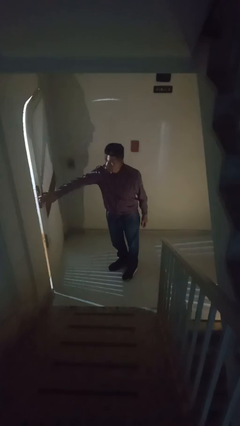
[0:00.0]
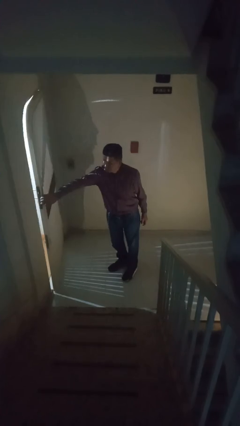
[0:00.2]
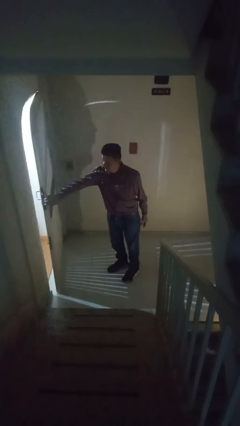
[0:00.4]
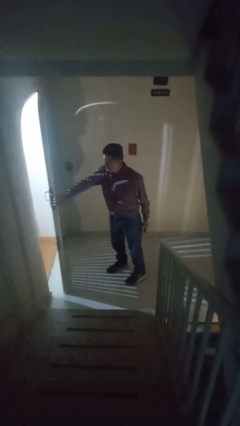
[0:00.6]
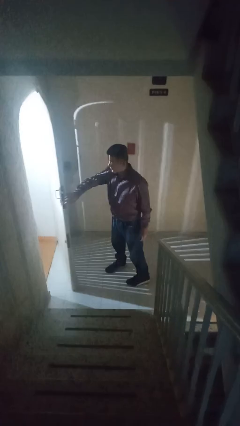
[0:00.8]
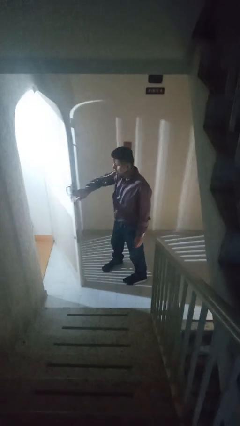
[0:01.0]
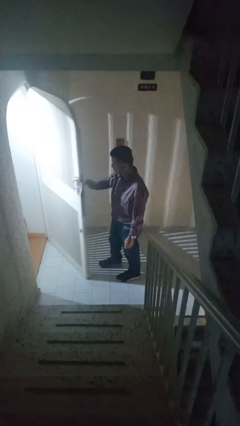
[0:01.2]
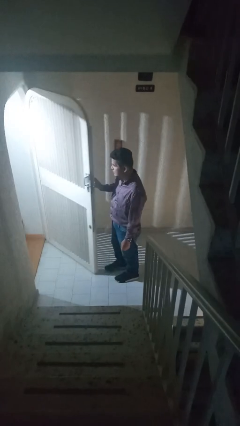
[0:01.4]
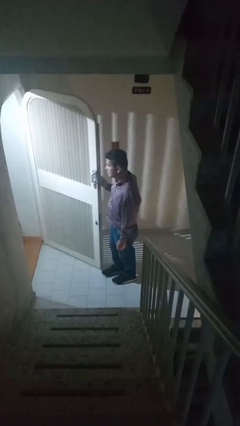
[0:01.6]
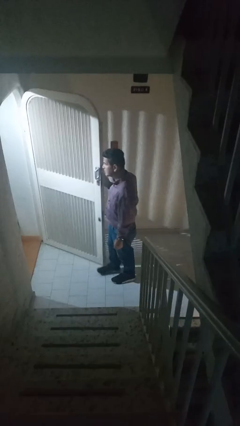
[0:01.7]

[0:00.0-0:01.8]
person opens facility door

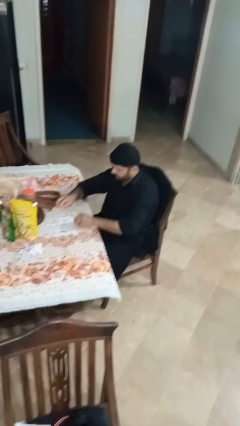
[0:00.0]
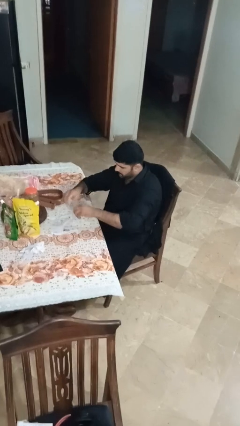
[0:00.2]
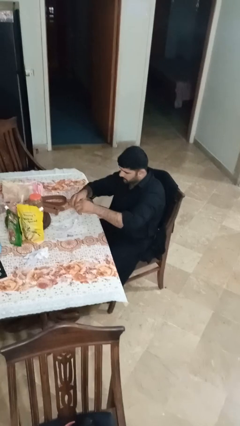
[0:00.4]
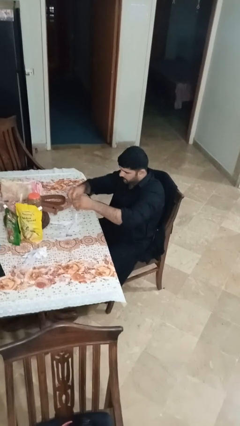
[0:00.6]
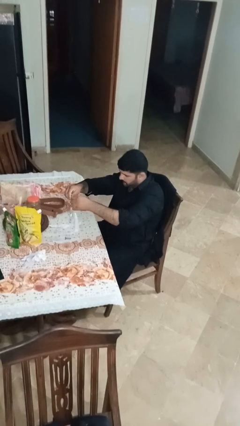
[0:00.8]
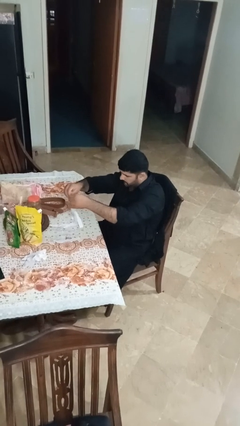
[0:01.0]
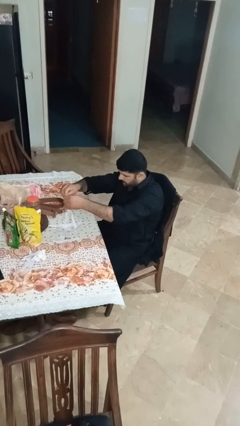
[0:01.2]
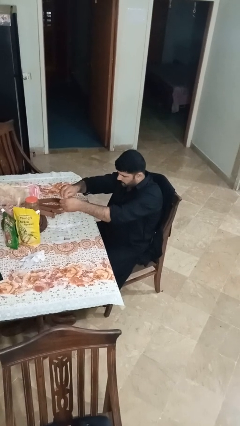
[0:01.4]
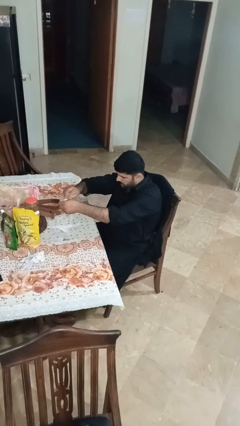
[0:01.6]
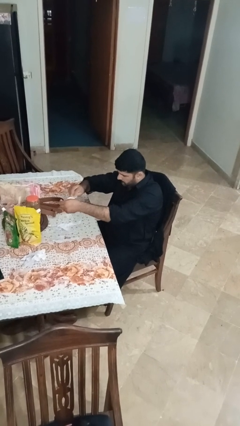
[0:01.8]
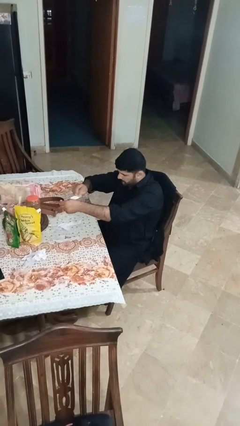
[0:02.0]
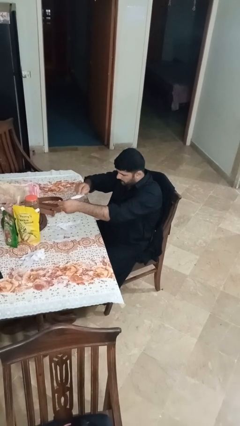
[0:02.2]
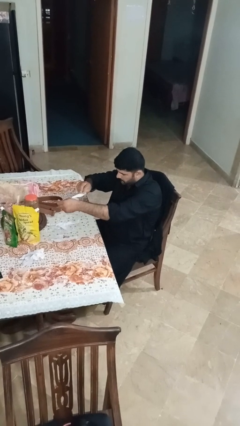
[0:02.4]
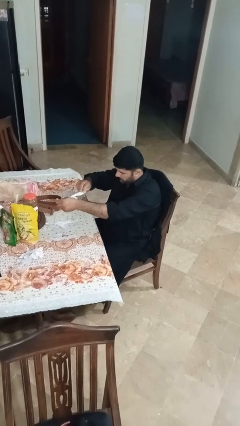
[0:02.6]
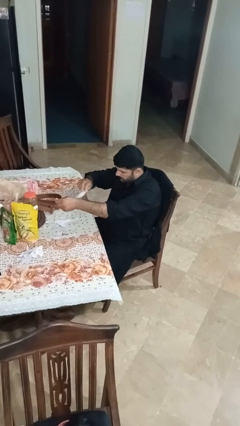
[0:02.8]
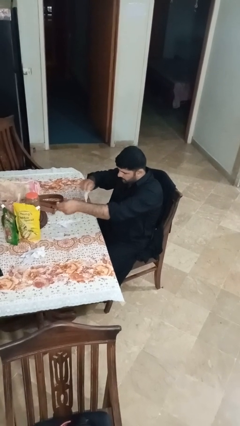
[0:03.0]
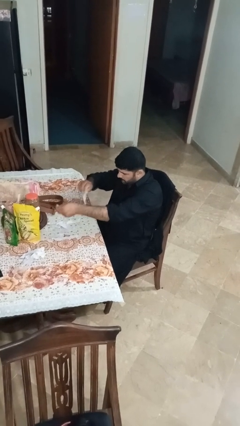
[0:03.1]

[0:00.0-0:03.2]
person tears paper

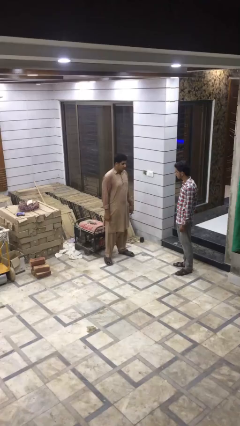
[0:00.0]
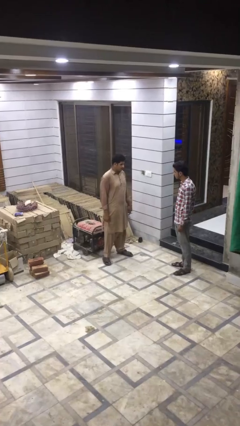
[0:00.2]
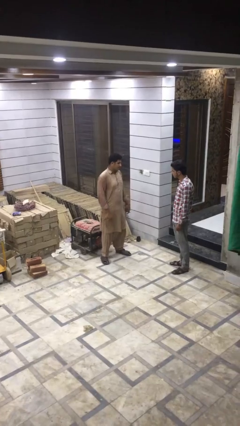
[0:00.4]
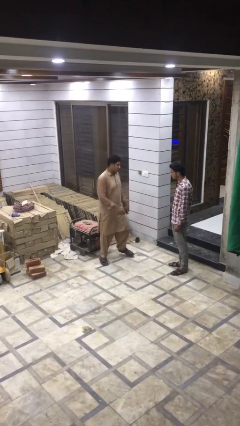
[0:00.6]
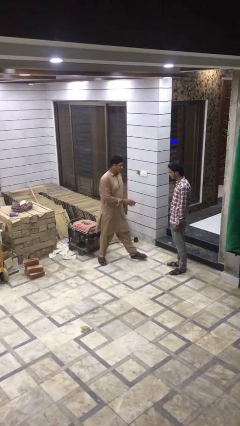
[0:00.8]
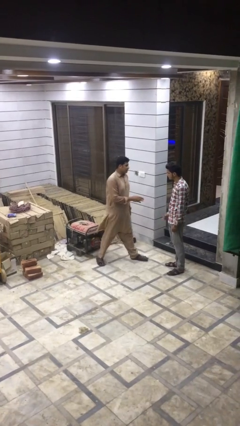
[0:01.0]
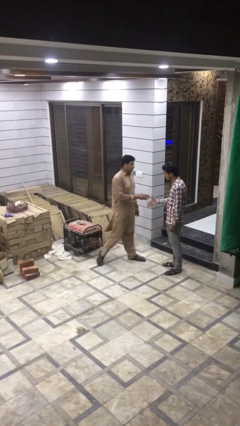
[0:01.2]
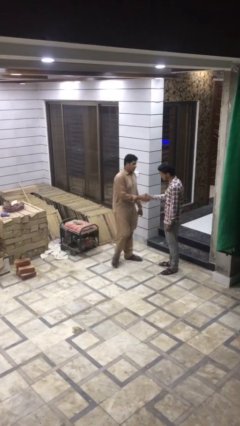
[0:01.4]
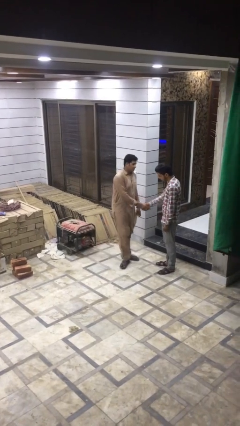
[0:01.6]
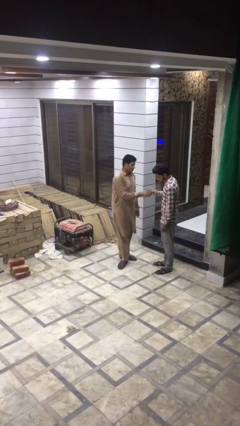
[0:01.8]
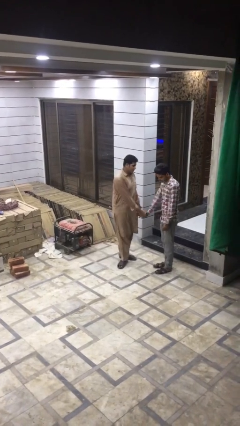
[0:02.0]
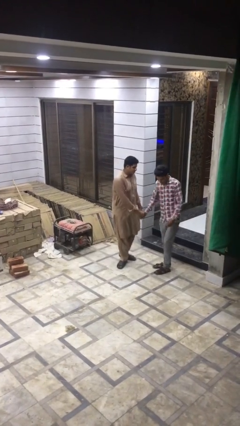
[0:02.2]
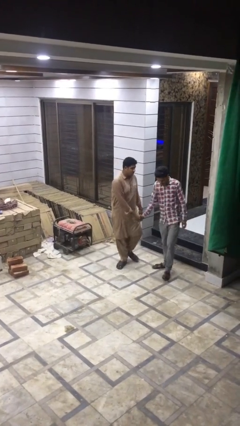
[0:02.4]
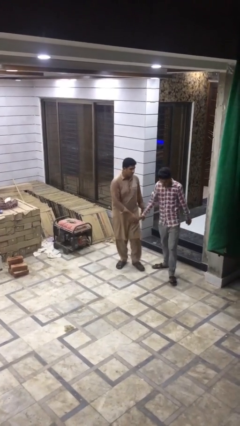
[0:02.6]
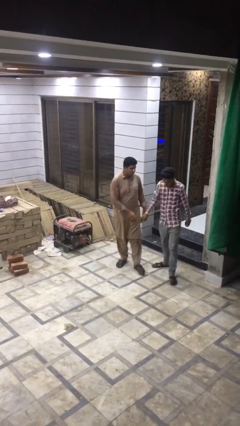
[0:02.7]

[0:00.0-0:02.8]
person shakes hand

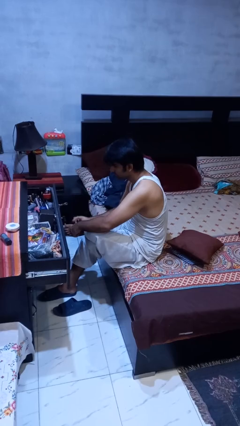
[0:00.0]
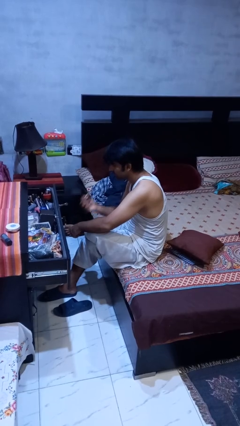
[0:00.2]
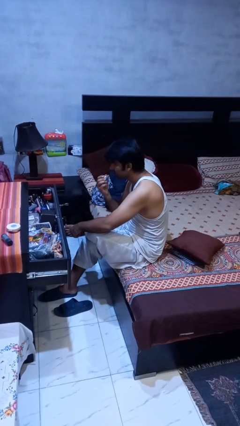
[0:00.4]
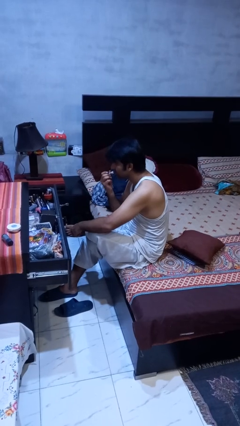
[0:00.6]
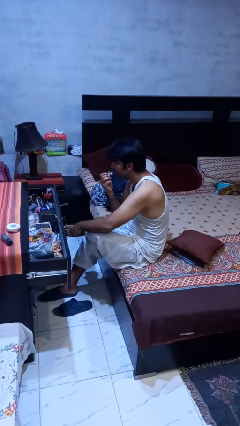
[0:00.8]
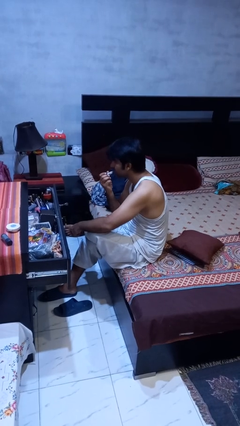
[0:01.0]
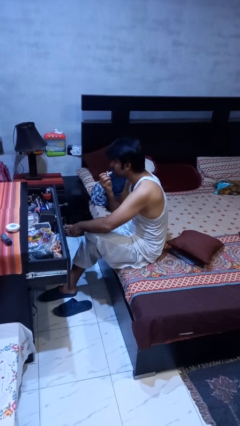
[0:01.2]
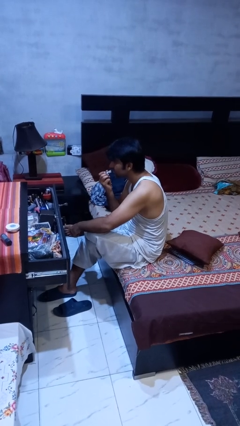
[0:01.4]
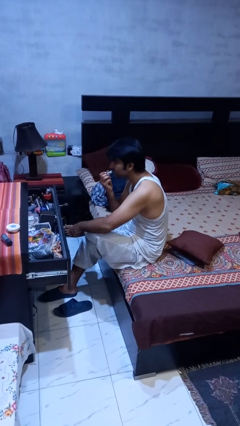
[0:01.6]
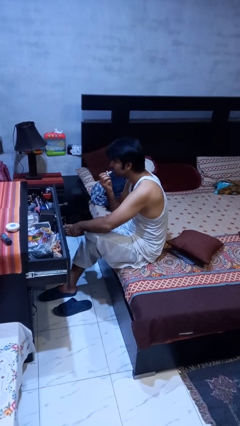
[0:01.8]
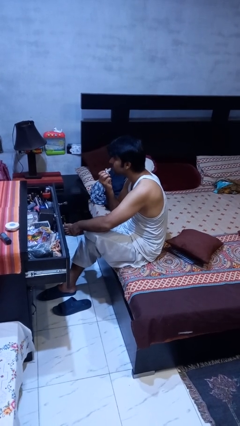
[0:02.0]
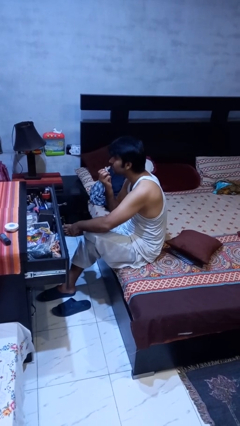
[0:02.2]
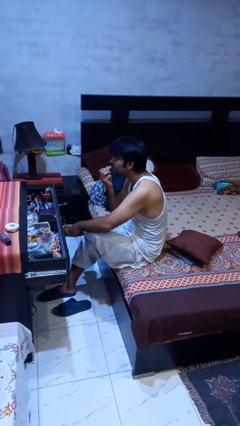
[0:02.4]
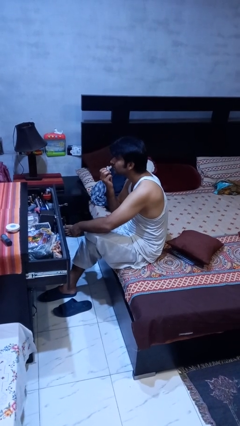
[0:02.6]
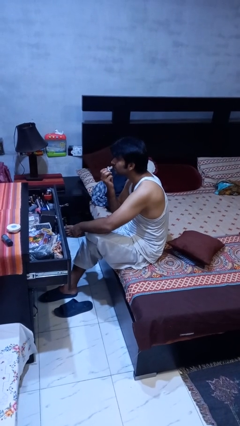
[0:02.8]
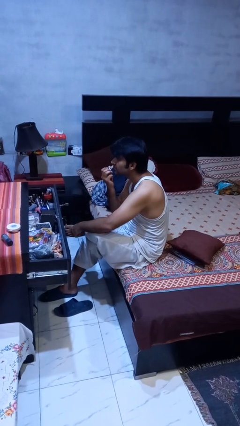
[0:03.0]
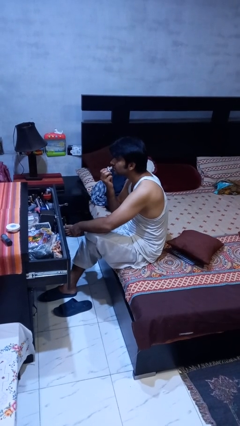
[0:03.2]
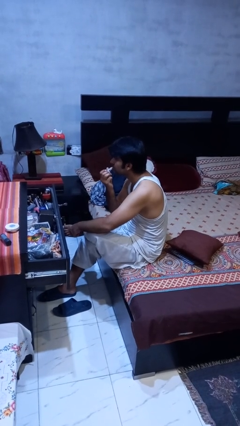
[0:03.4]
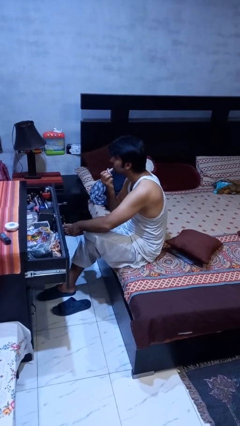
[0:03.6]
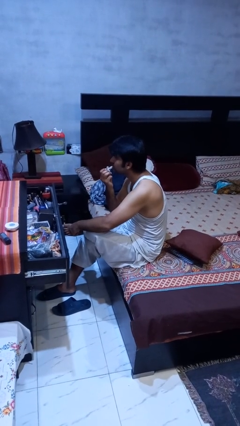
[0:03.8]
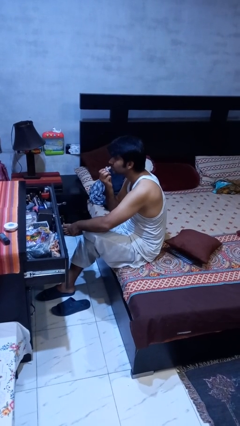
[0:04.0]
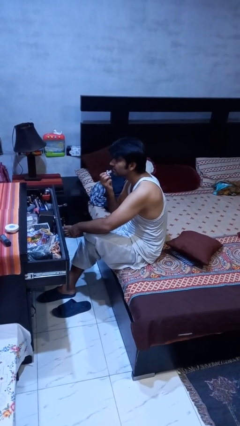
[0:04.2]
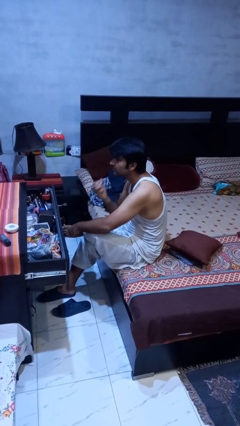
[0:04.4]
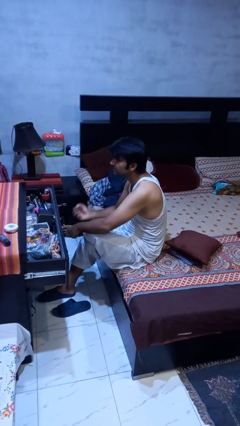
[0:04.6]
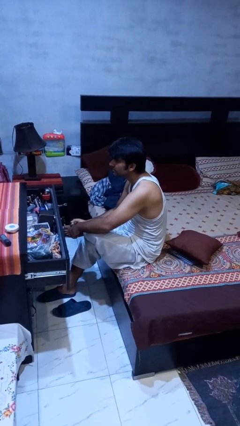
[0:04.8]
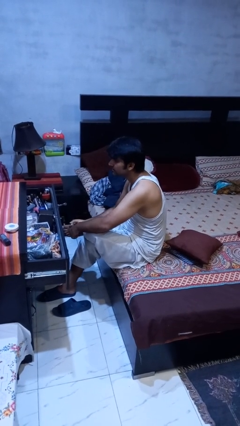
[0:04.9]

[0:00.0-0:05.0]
person applies lip makeup

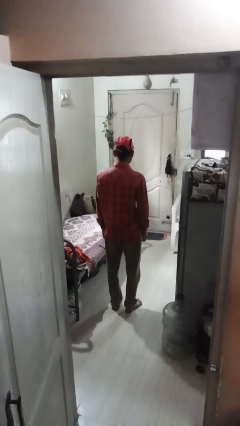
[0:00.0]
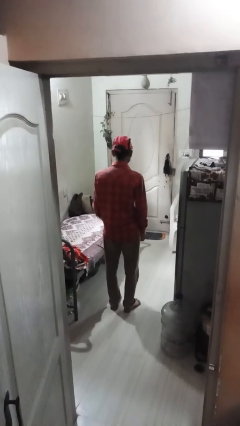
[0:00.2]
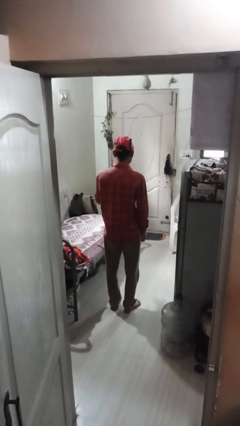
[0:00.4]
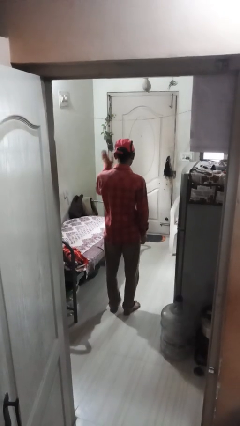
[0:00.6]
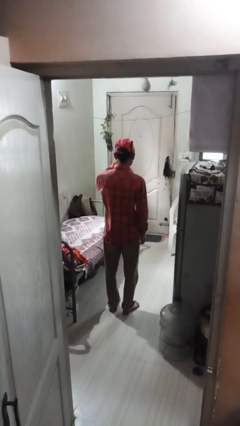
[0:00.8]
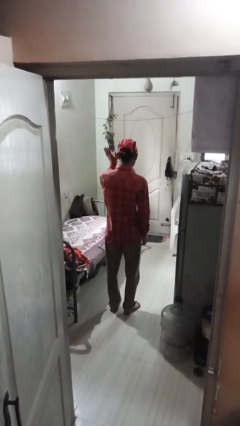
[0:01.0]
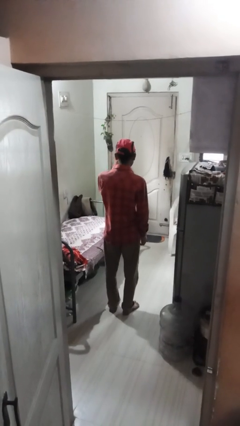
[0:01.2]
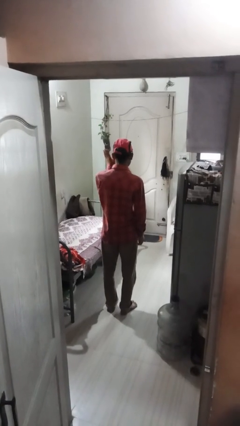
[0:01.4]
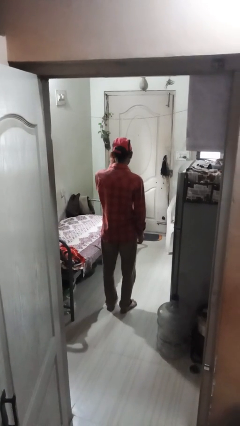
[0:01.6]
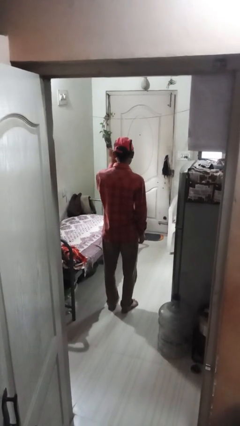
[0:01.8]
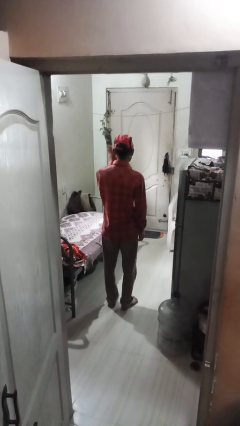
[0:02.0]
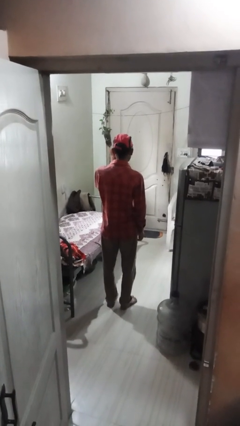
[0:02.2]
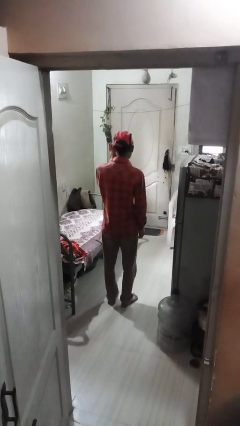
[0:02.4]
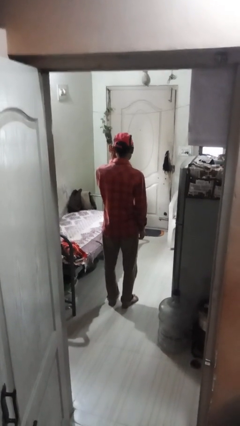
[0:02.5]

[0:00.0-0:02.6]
person waves at person

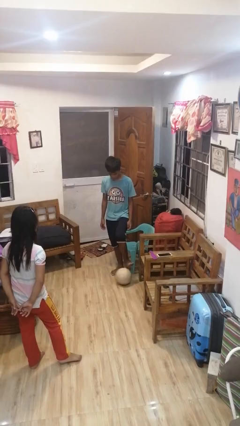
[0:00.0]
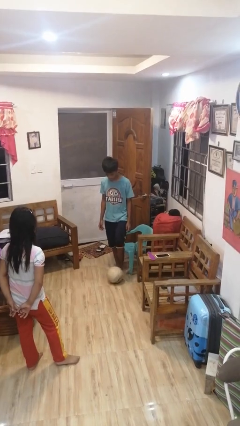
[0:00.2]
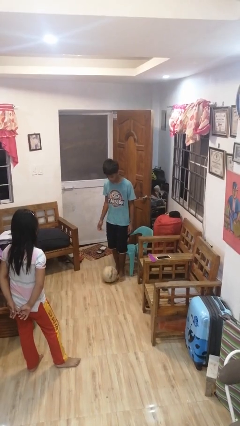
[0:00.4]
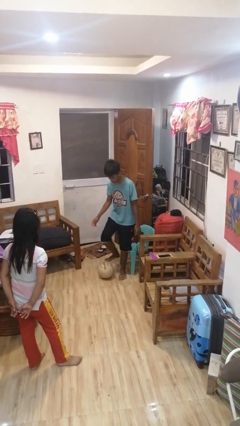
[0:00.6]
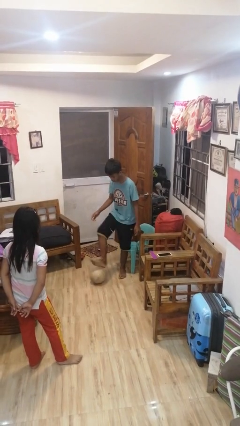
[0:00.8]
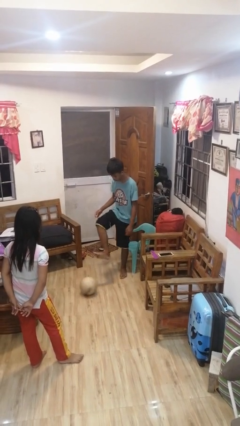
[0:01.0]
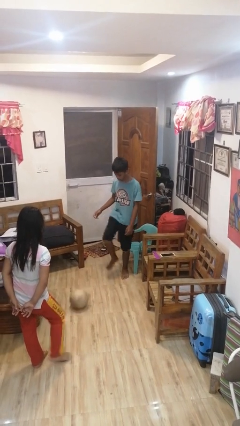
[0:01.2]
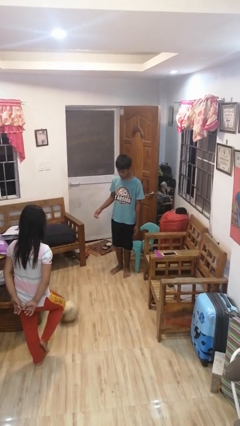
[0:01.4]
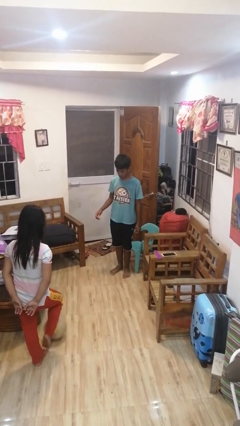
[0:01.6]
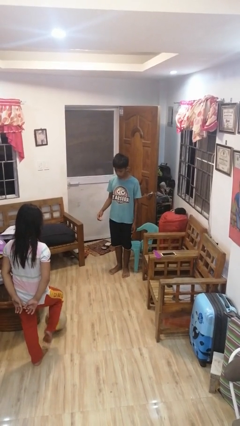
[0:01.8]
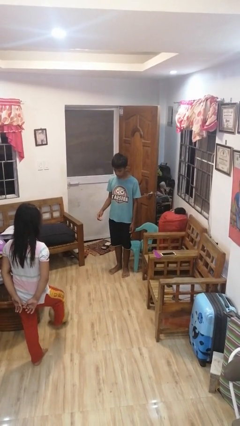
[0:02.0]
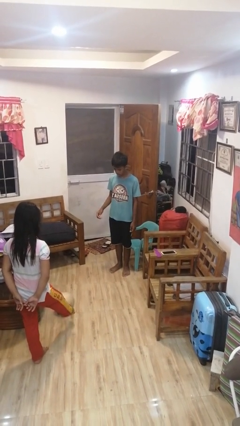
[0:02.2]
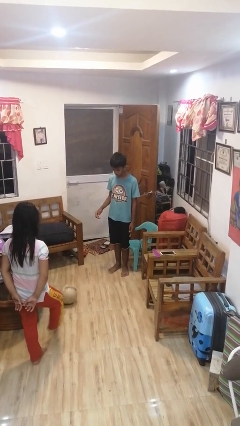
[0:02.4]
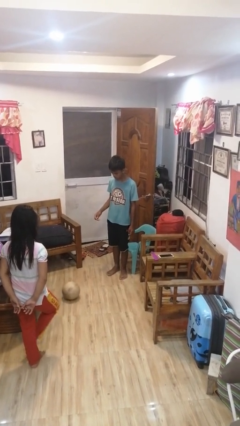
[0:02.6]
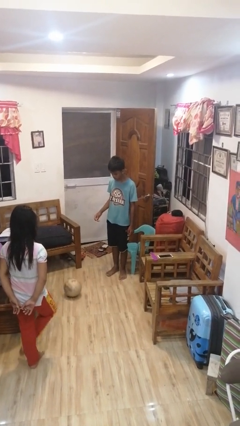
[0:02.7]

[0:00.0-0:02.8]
person kicks object to person
